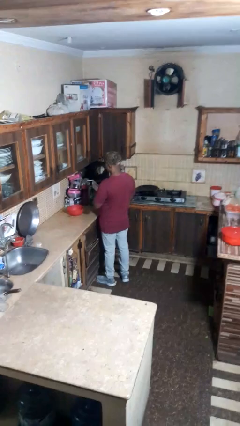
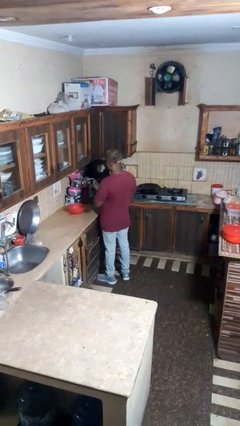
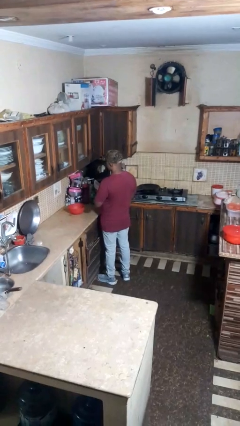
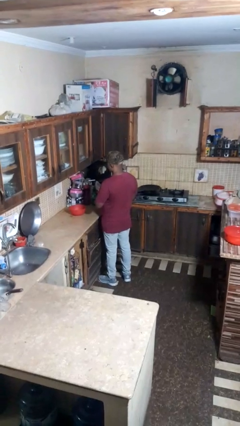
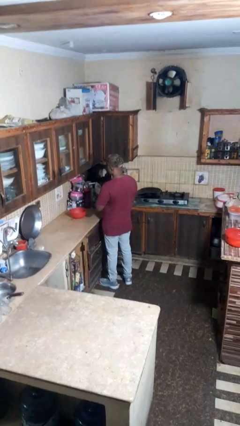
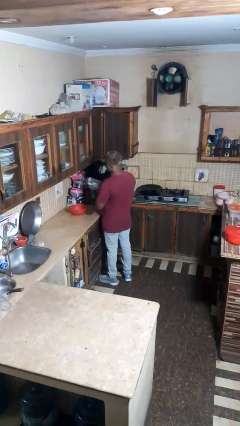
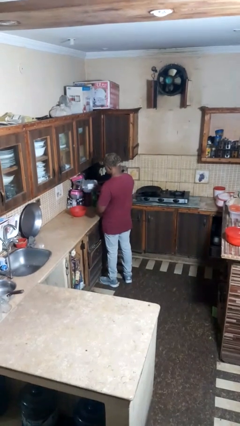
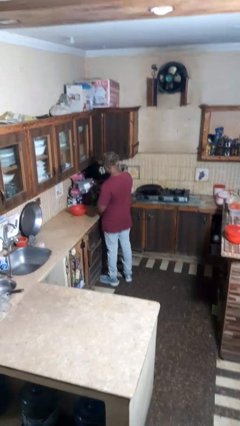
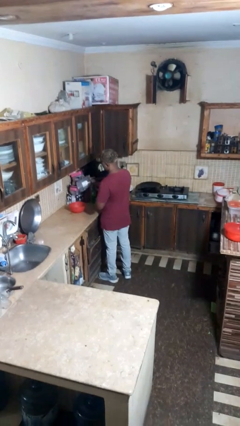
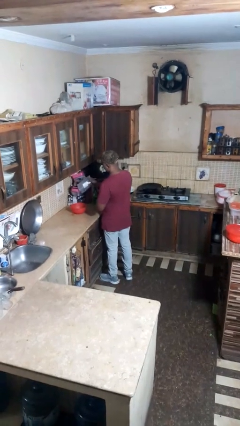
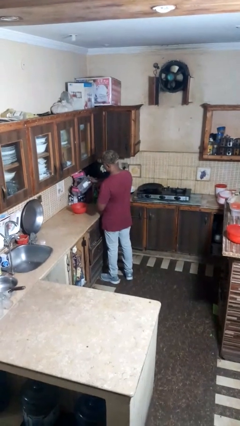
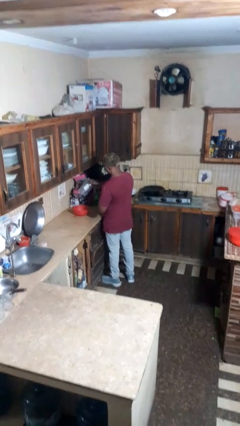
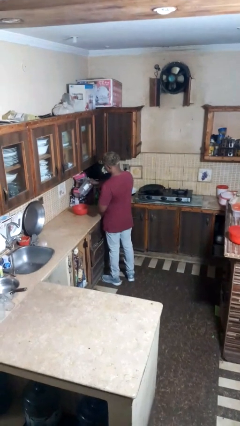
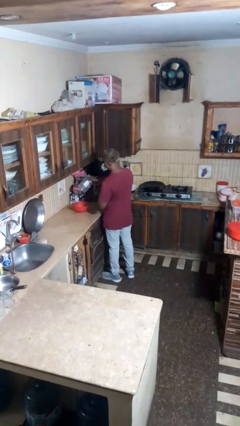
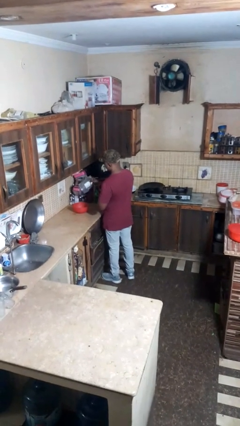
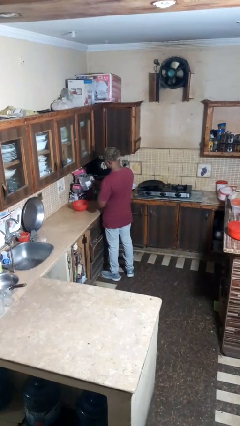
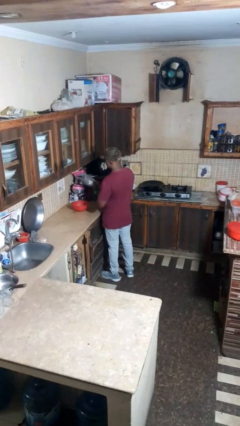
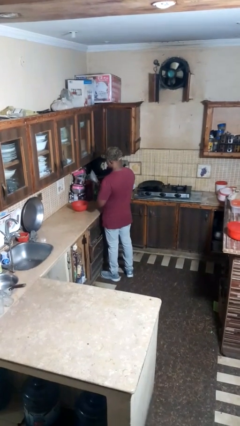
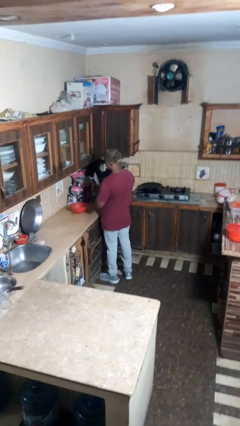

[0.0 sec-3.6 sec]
person pours into bowl

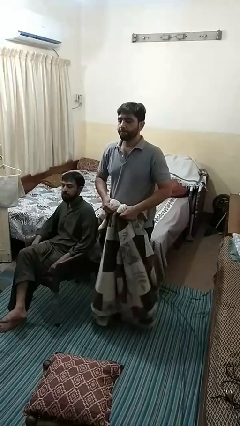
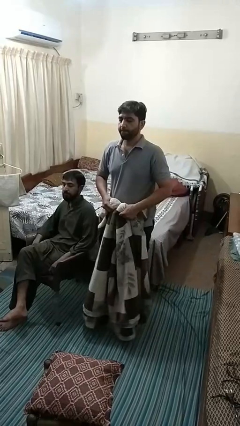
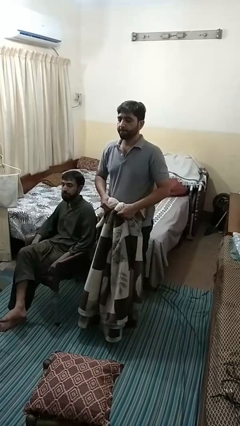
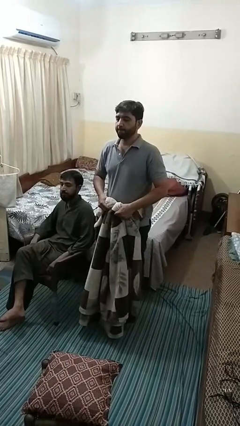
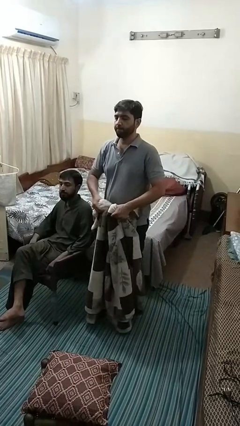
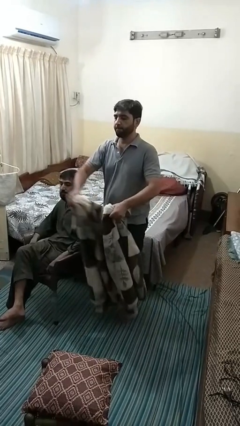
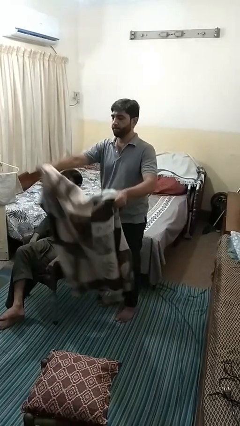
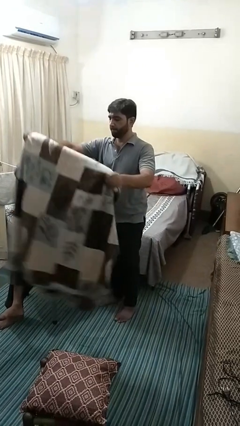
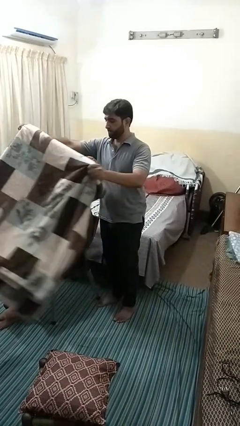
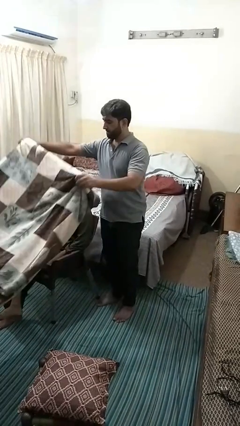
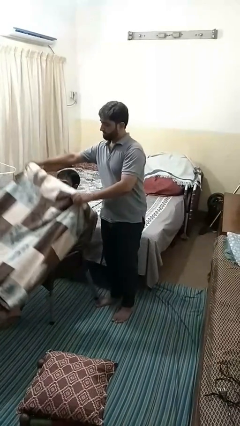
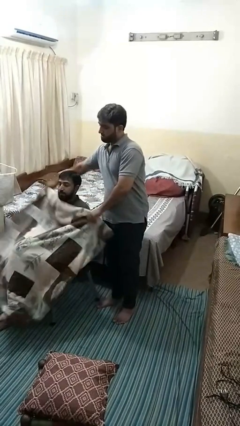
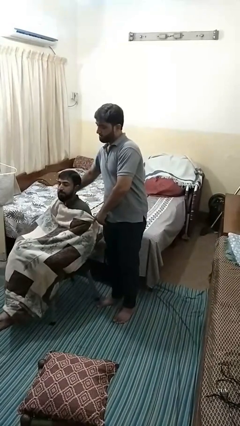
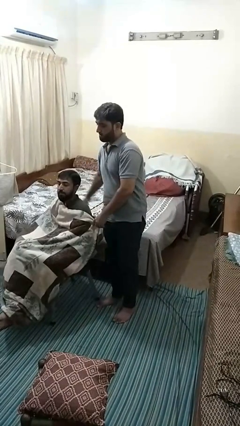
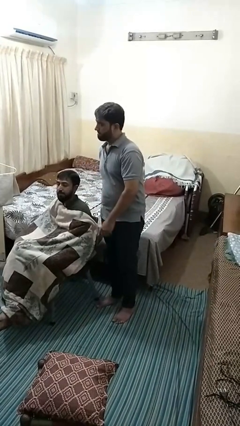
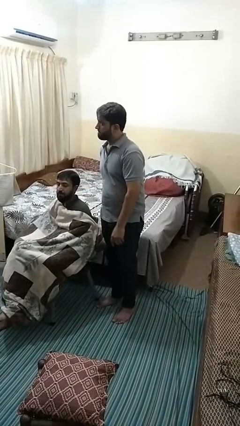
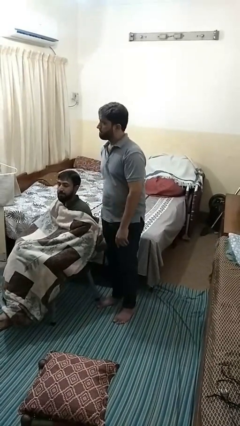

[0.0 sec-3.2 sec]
person covers friend with blanket

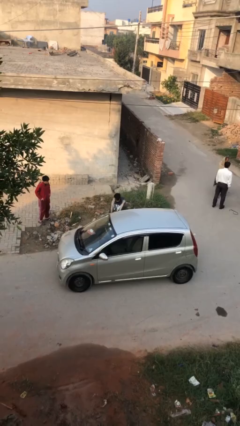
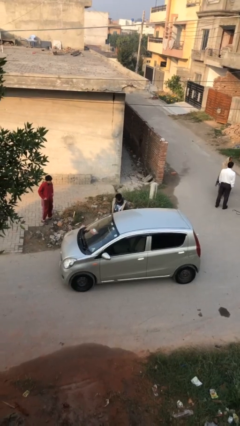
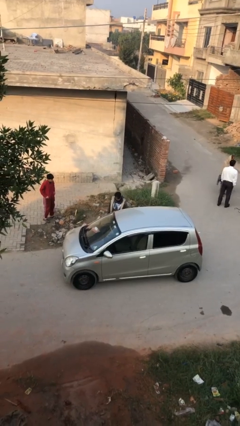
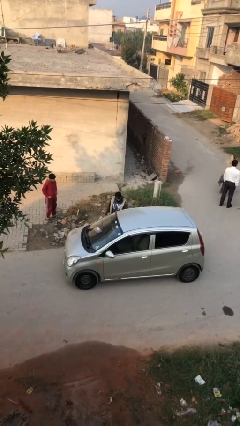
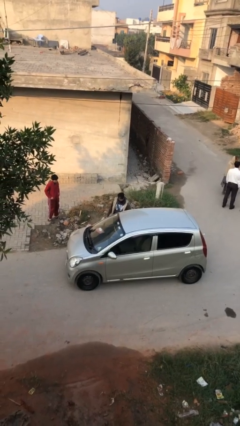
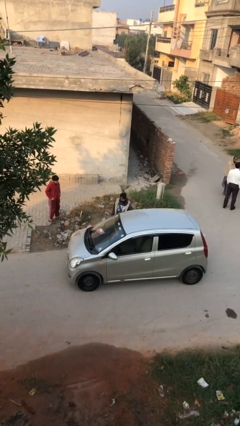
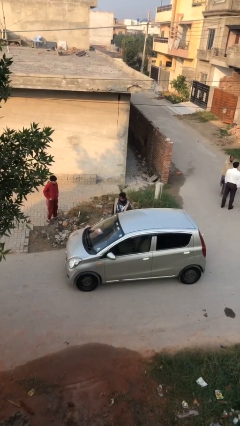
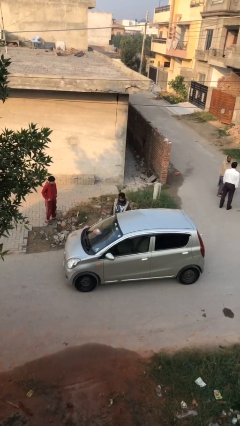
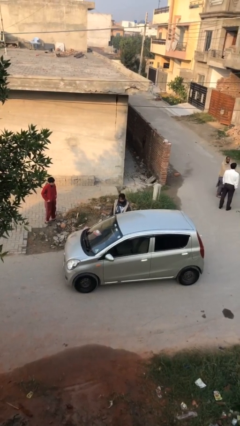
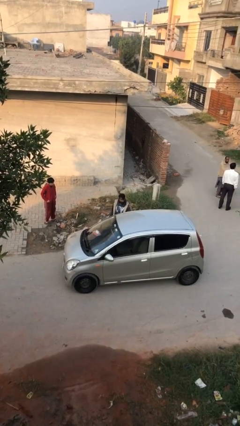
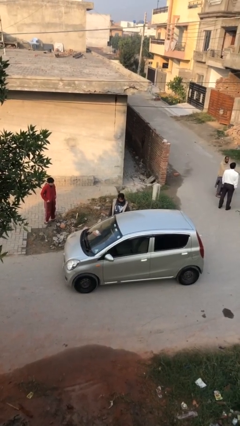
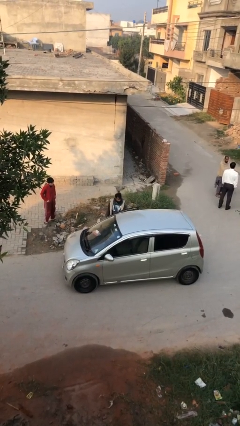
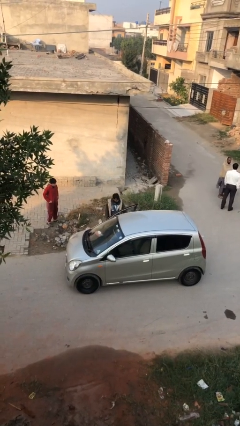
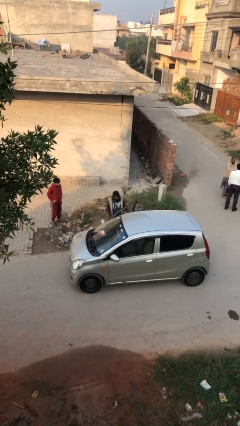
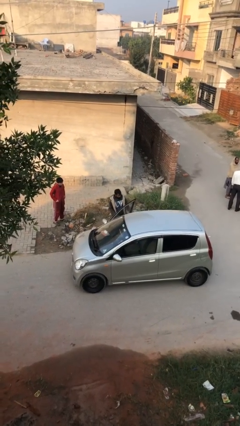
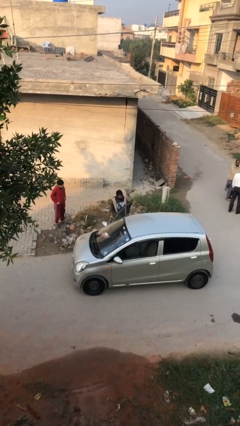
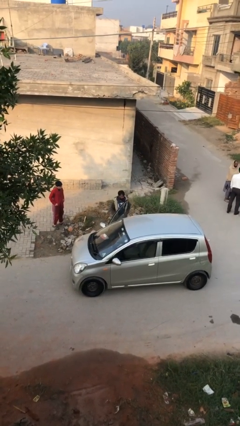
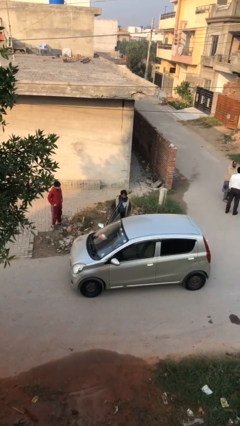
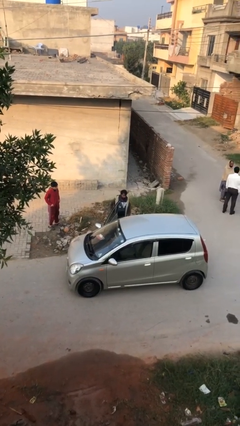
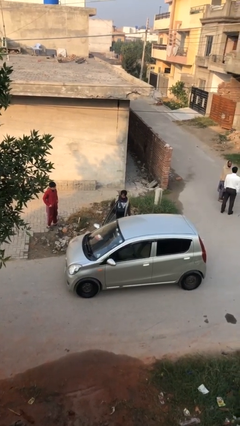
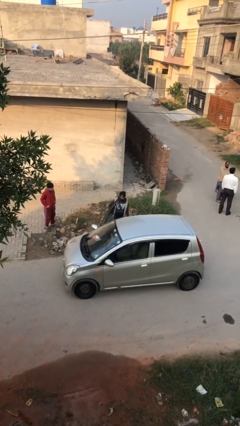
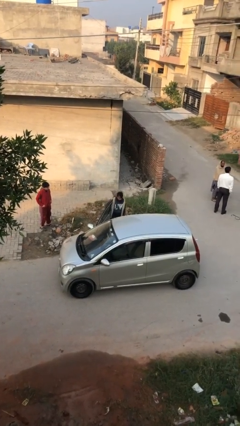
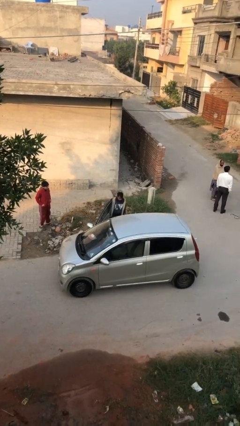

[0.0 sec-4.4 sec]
person opens car door

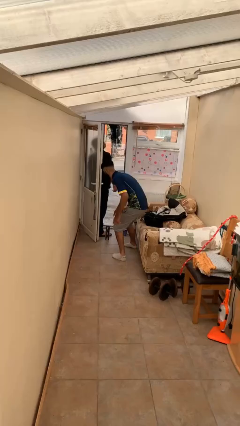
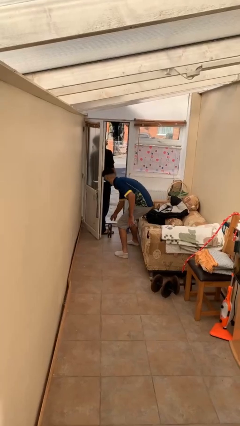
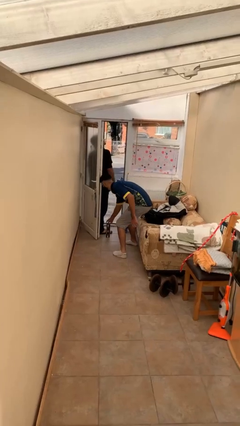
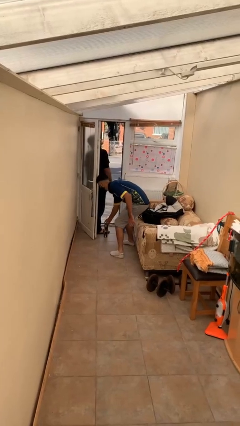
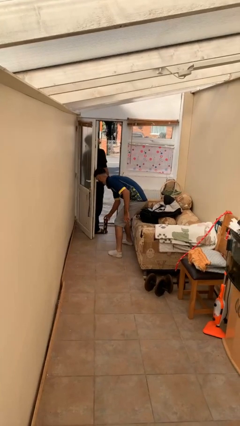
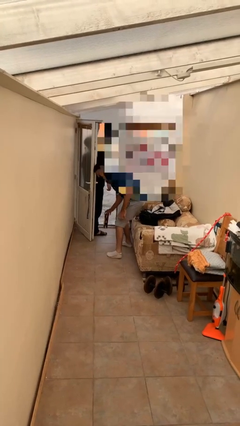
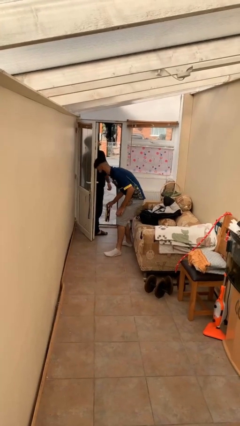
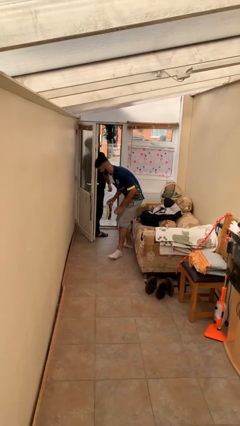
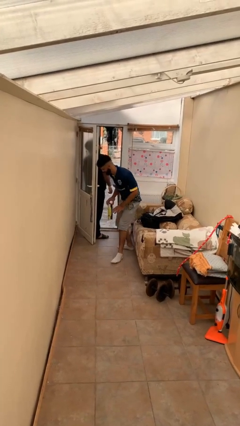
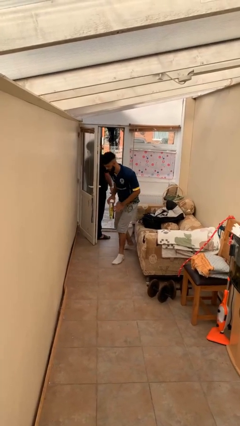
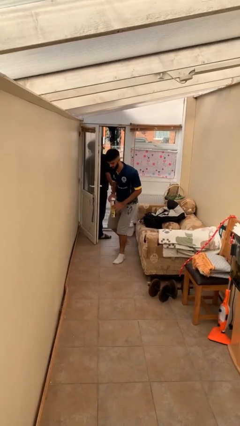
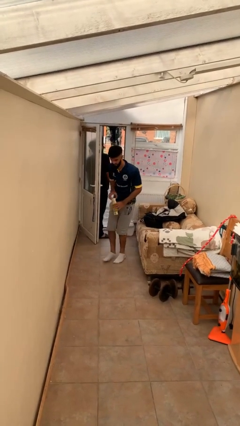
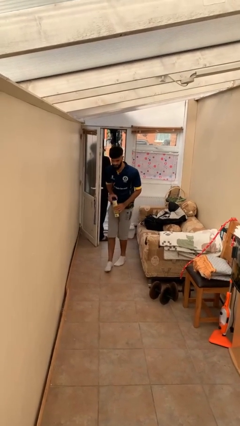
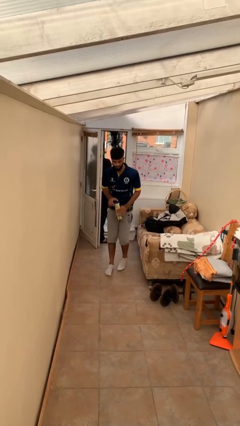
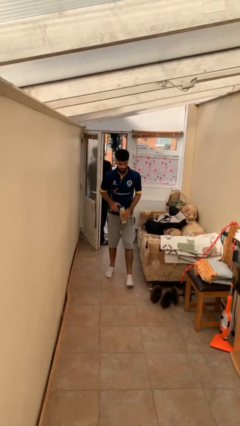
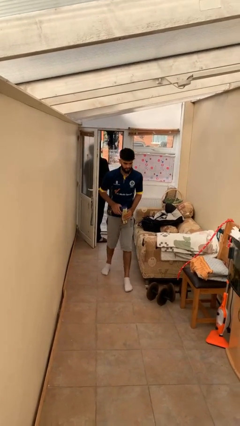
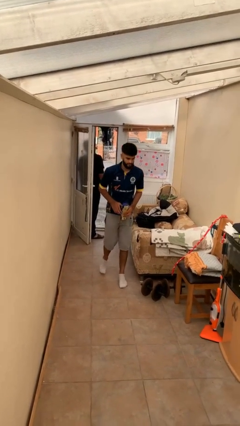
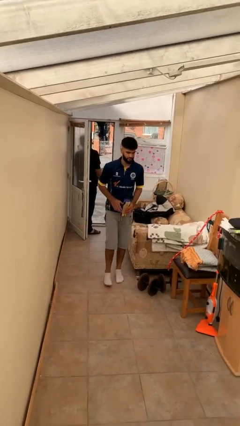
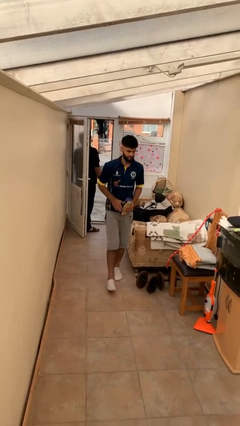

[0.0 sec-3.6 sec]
person steals object from person

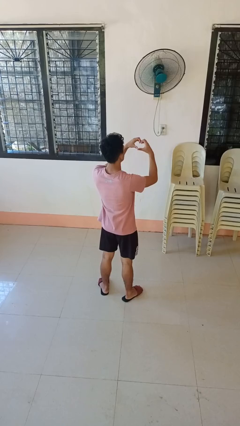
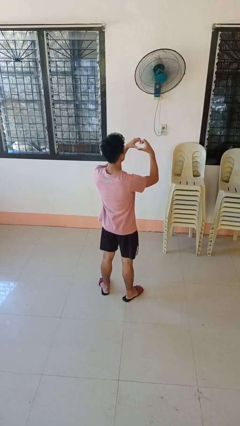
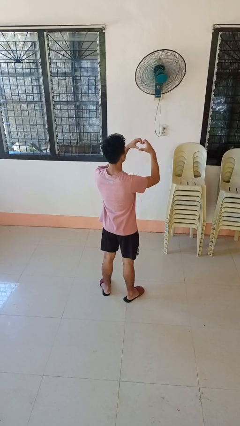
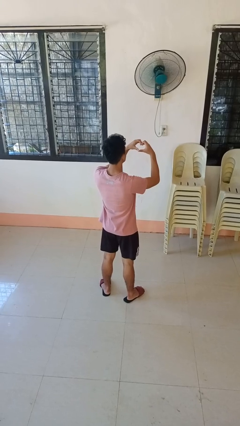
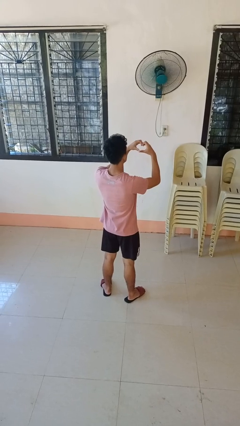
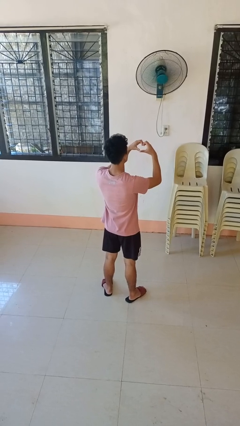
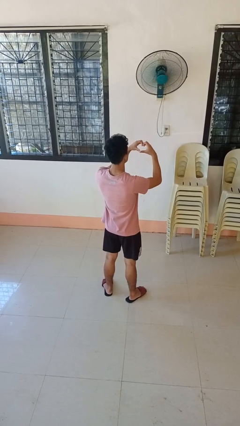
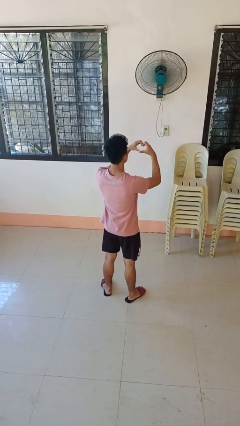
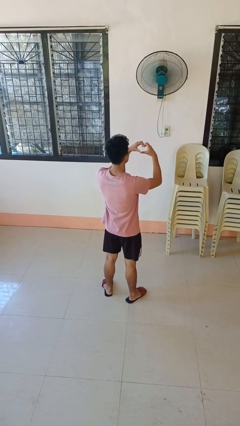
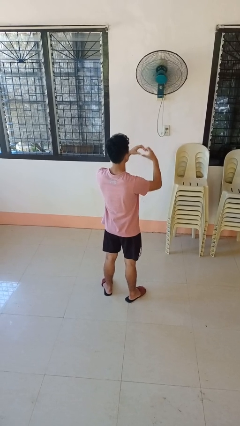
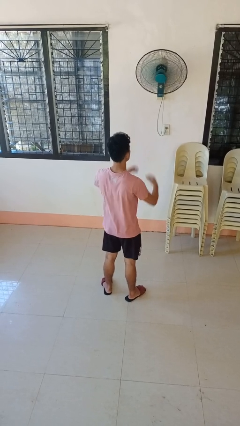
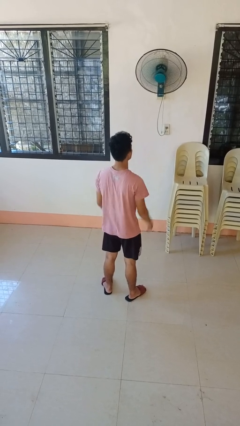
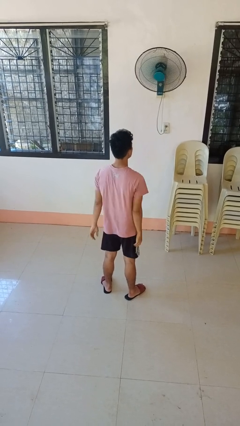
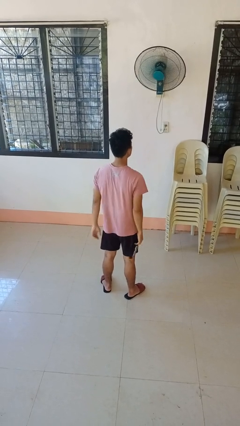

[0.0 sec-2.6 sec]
person gestures heart
